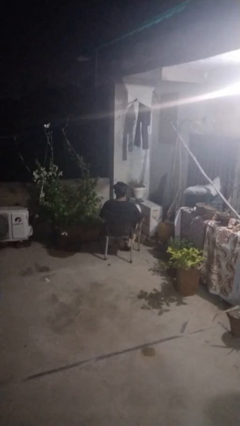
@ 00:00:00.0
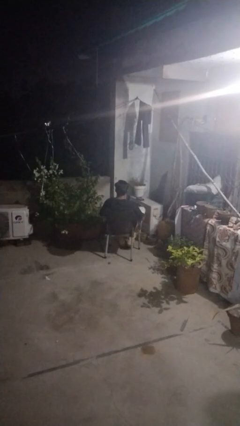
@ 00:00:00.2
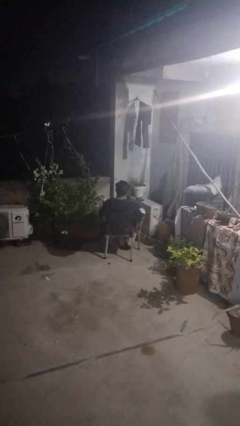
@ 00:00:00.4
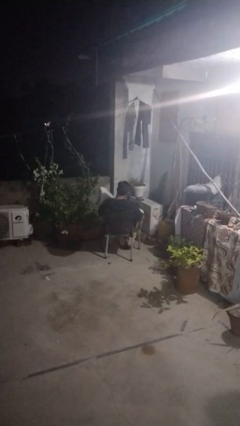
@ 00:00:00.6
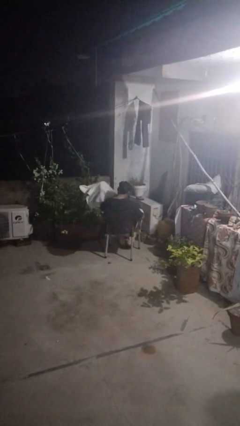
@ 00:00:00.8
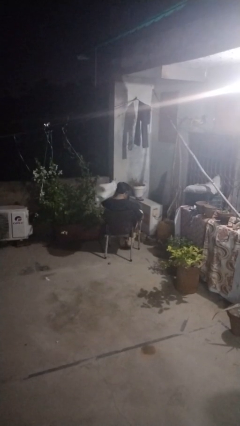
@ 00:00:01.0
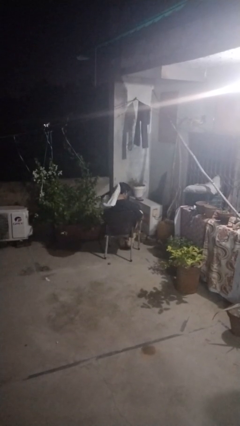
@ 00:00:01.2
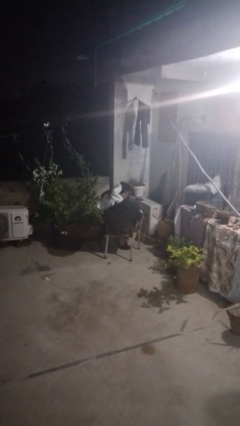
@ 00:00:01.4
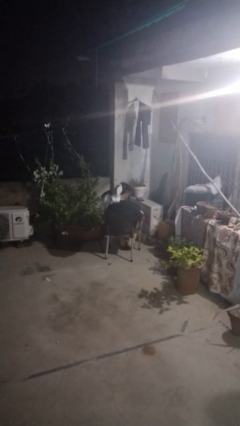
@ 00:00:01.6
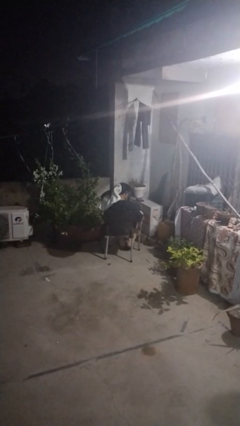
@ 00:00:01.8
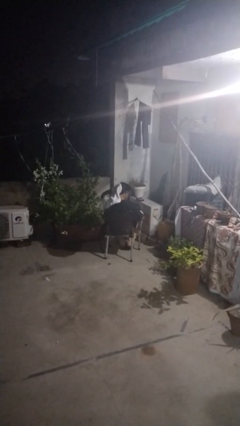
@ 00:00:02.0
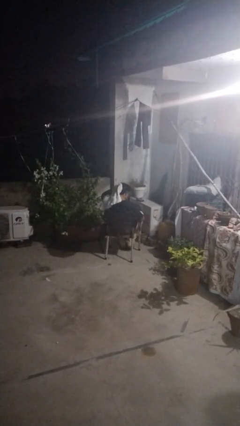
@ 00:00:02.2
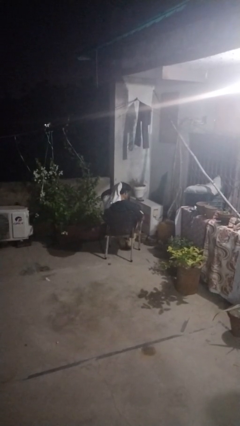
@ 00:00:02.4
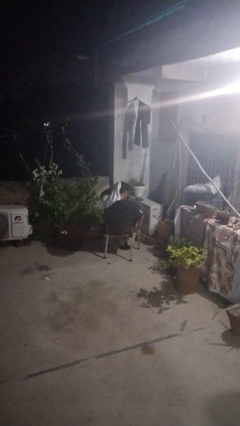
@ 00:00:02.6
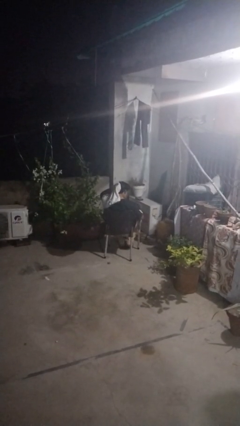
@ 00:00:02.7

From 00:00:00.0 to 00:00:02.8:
person dries hair with towel

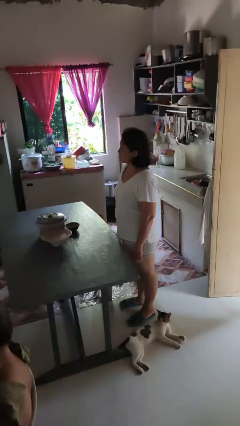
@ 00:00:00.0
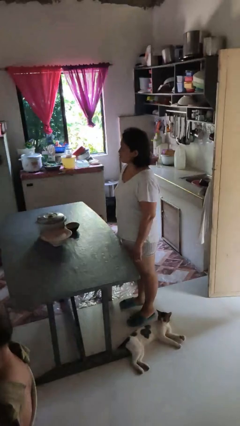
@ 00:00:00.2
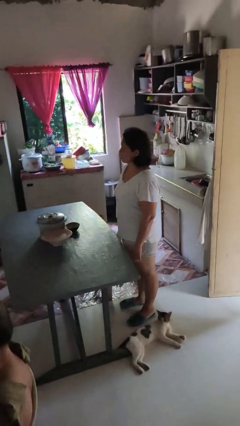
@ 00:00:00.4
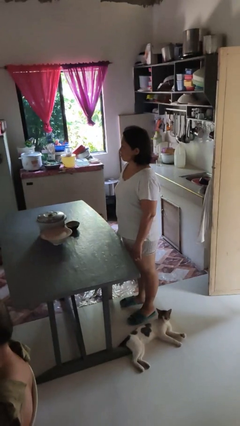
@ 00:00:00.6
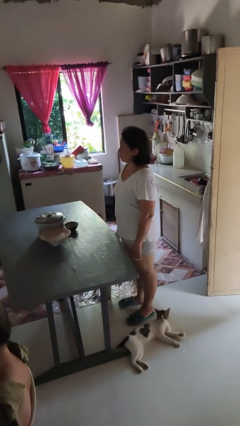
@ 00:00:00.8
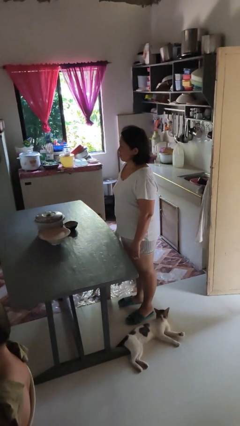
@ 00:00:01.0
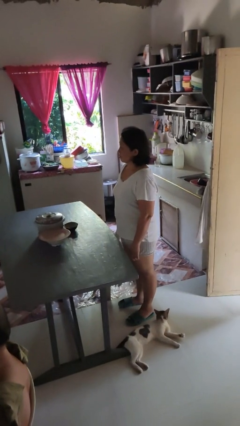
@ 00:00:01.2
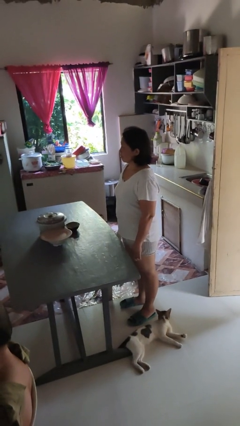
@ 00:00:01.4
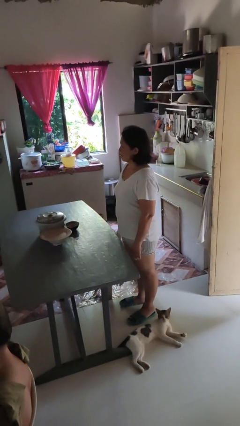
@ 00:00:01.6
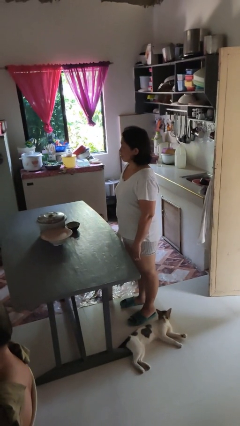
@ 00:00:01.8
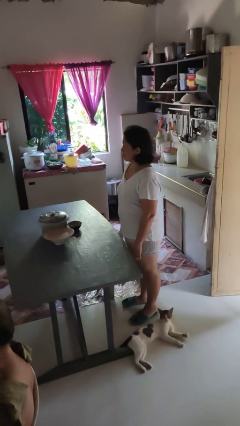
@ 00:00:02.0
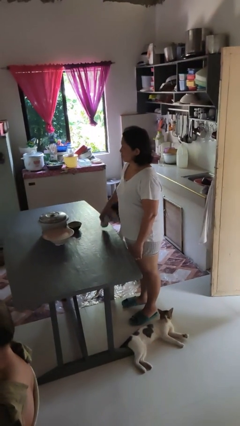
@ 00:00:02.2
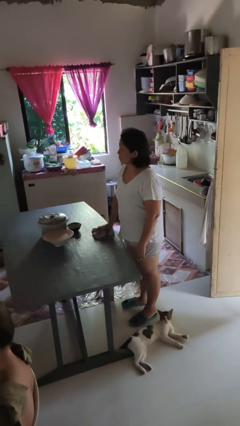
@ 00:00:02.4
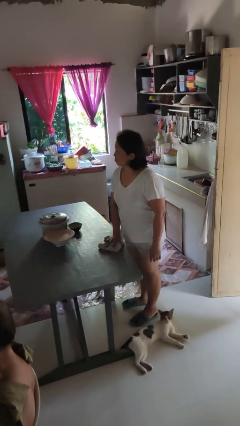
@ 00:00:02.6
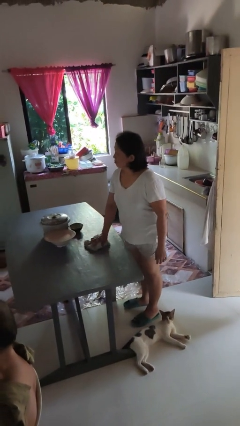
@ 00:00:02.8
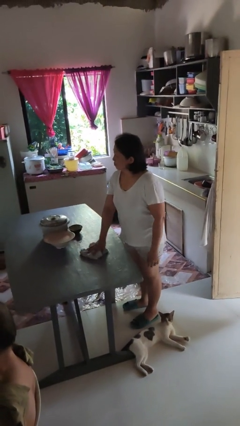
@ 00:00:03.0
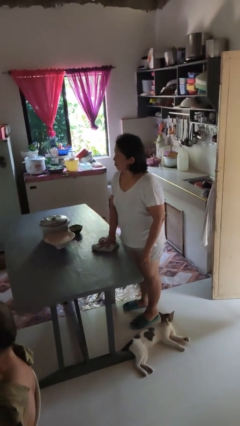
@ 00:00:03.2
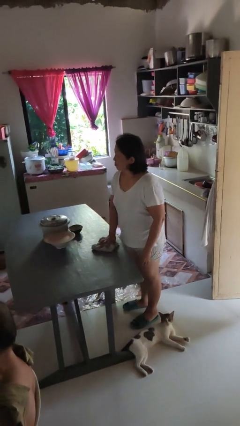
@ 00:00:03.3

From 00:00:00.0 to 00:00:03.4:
person cleans table with rag

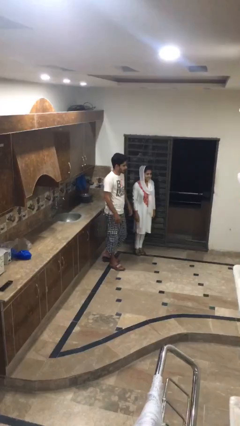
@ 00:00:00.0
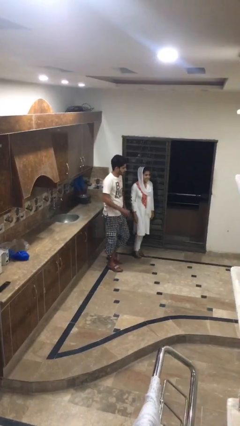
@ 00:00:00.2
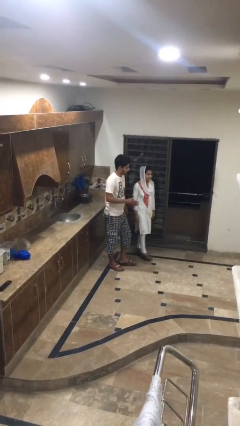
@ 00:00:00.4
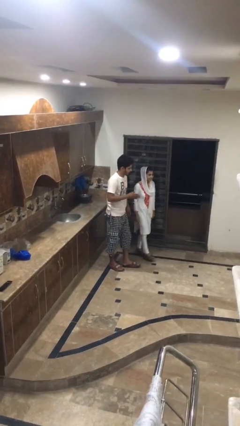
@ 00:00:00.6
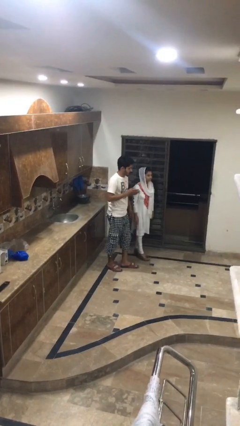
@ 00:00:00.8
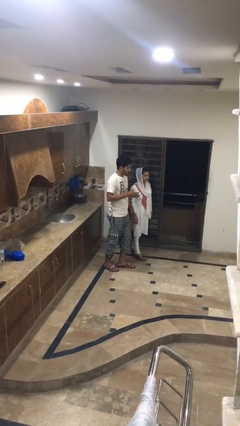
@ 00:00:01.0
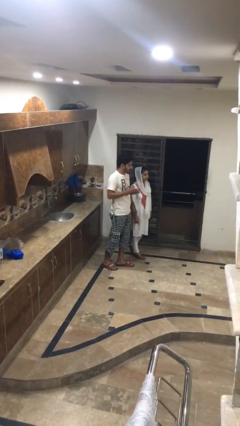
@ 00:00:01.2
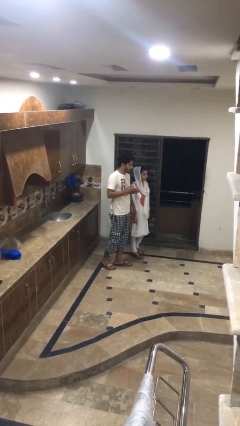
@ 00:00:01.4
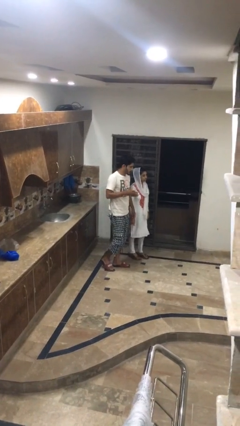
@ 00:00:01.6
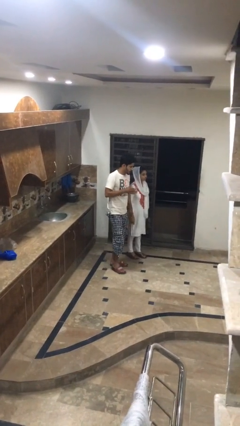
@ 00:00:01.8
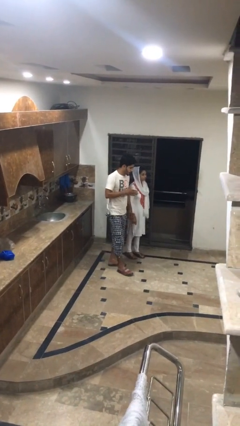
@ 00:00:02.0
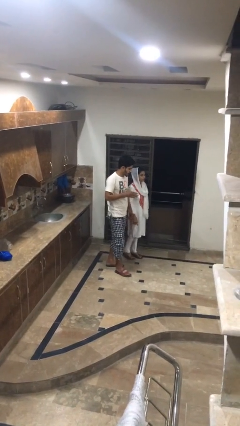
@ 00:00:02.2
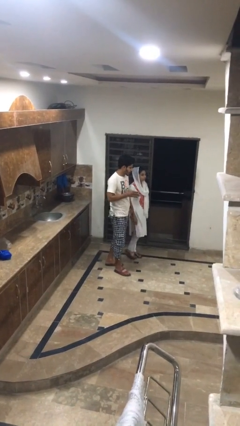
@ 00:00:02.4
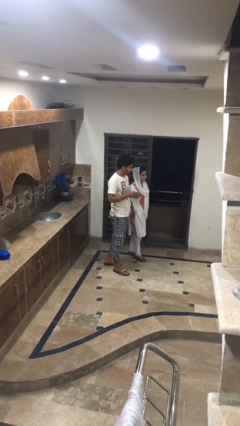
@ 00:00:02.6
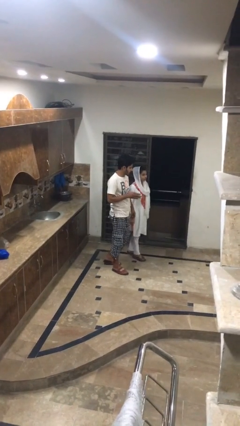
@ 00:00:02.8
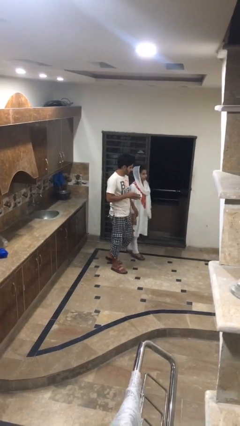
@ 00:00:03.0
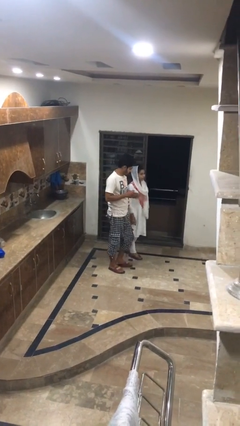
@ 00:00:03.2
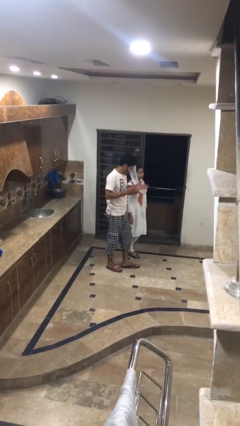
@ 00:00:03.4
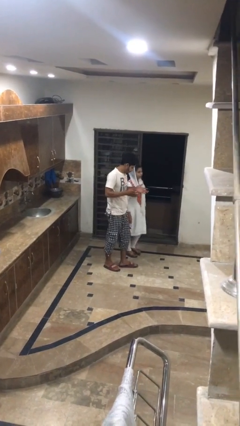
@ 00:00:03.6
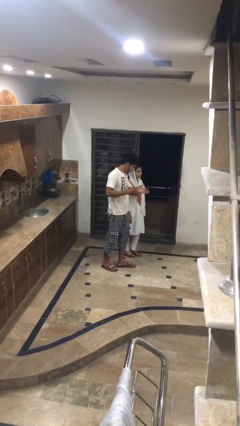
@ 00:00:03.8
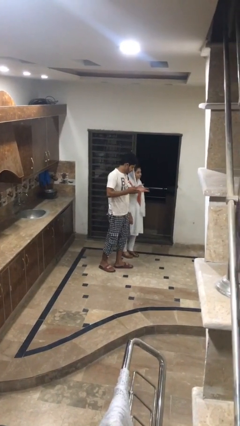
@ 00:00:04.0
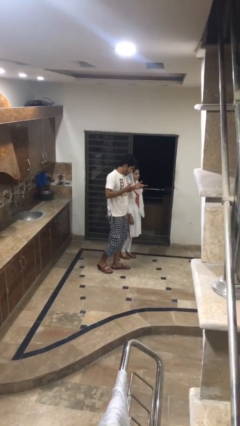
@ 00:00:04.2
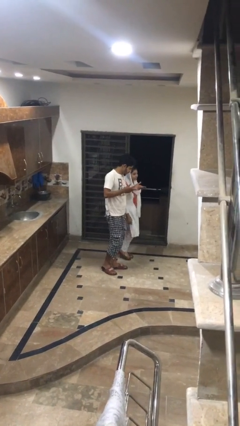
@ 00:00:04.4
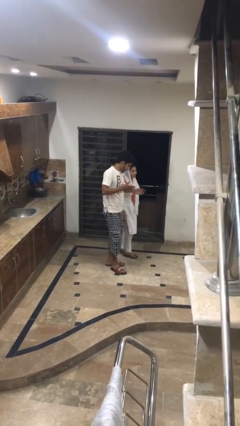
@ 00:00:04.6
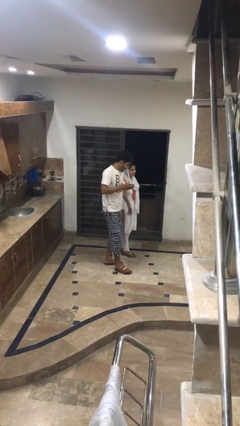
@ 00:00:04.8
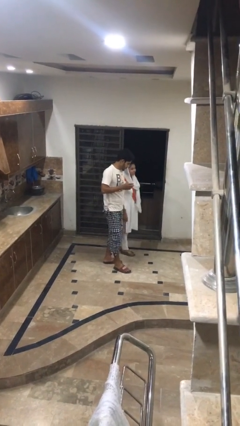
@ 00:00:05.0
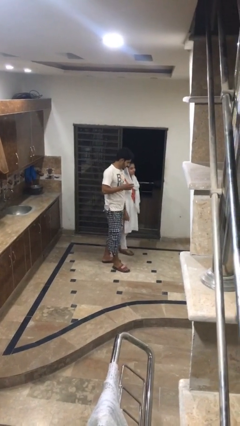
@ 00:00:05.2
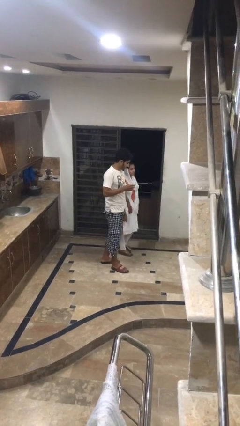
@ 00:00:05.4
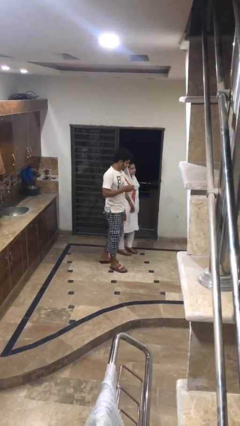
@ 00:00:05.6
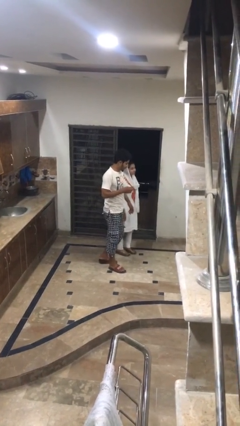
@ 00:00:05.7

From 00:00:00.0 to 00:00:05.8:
person talks to person

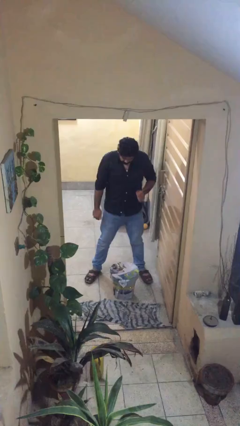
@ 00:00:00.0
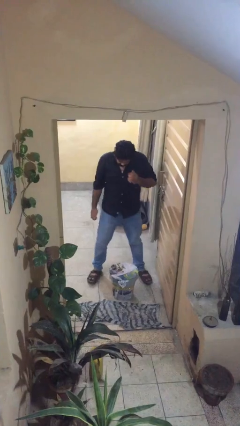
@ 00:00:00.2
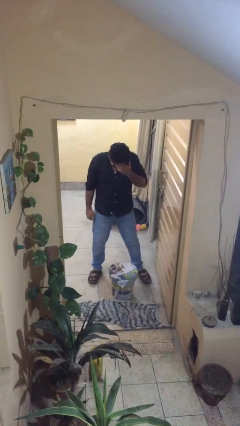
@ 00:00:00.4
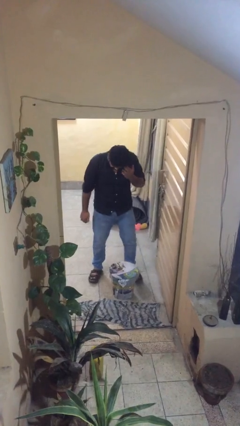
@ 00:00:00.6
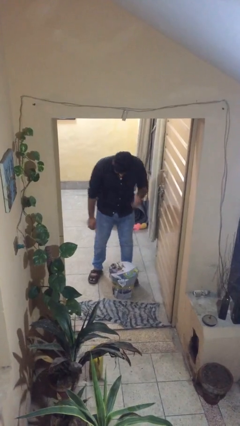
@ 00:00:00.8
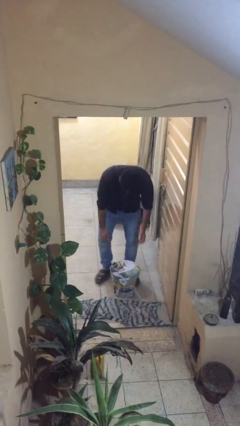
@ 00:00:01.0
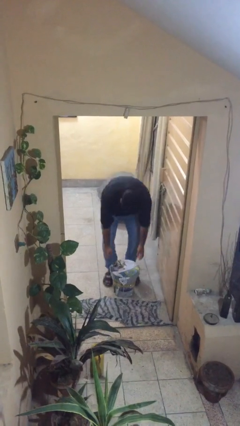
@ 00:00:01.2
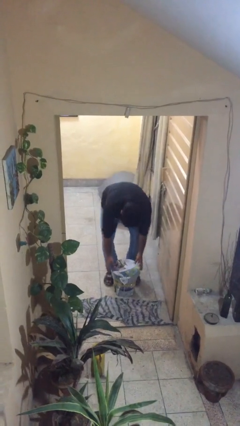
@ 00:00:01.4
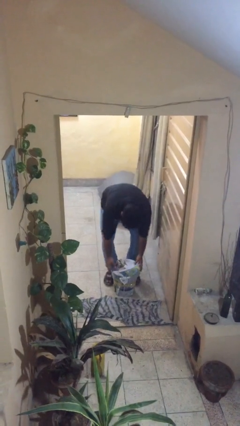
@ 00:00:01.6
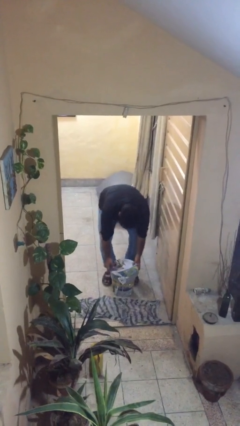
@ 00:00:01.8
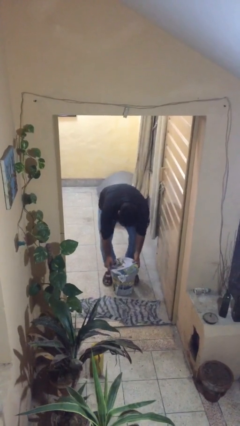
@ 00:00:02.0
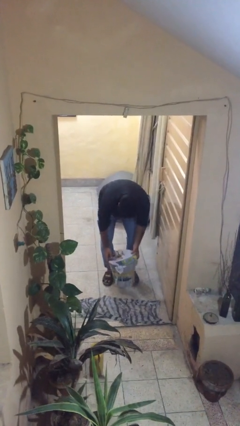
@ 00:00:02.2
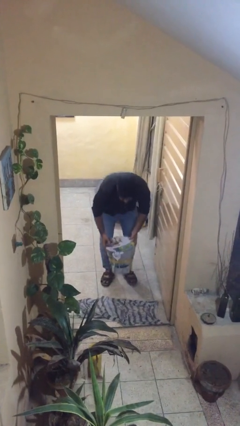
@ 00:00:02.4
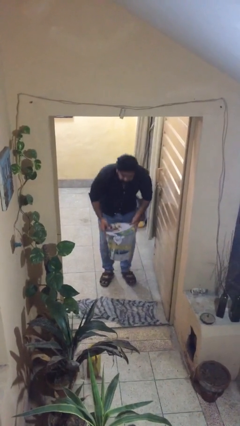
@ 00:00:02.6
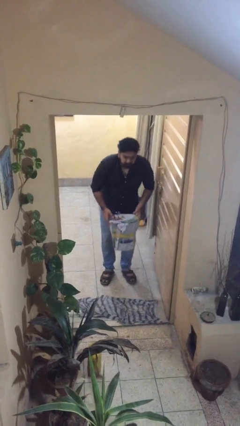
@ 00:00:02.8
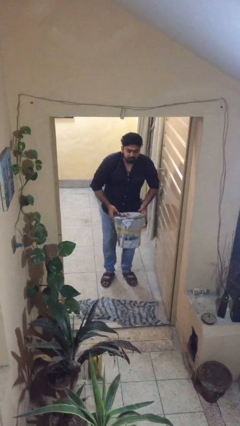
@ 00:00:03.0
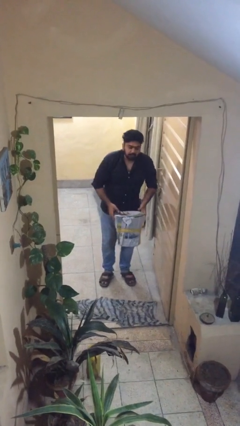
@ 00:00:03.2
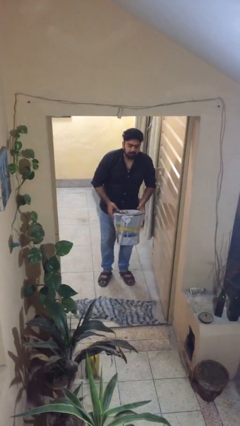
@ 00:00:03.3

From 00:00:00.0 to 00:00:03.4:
person picks up object from floor

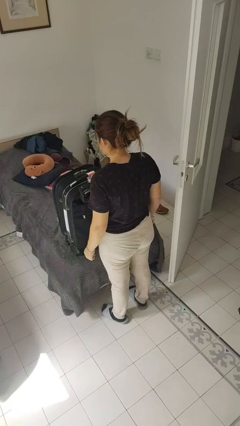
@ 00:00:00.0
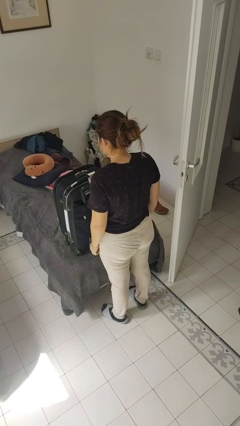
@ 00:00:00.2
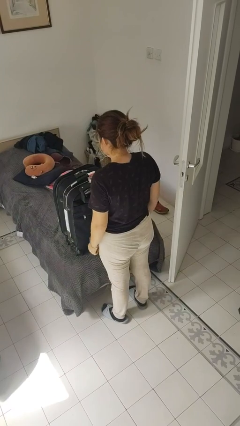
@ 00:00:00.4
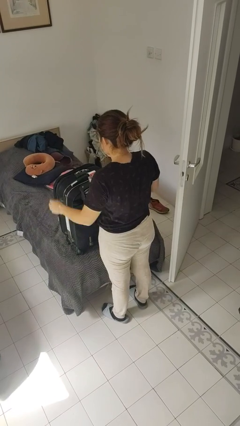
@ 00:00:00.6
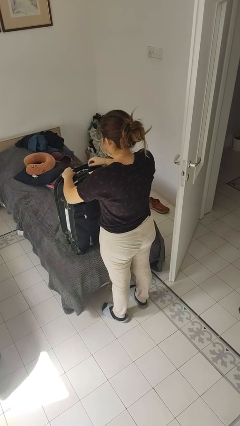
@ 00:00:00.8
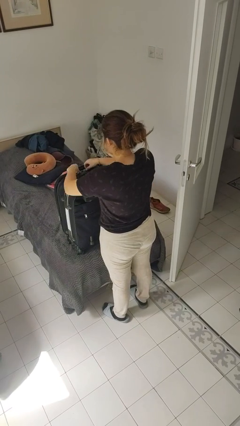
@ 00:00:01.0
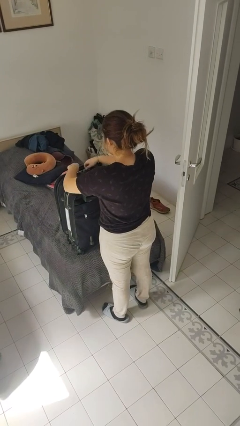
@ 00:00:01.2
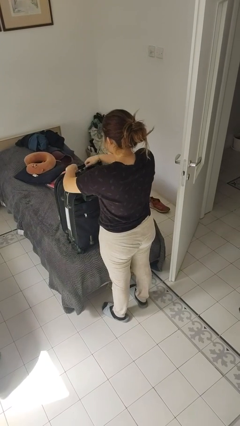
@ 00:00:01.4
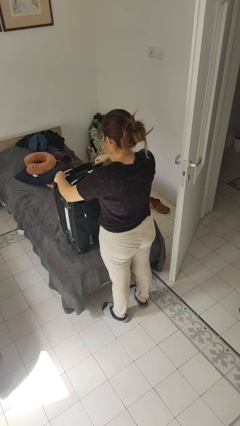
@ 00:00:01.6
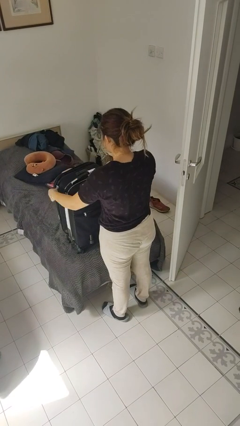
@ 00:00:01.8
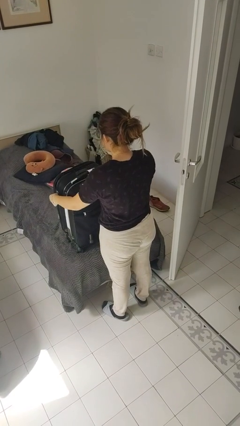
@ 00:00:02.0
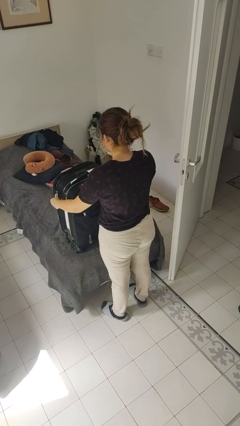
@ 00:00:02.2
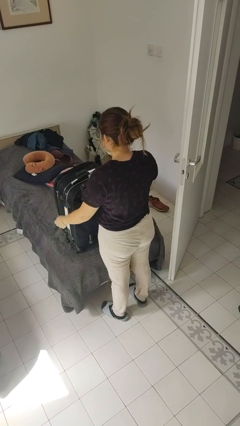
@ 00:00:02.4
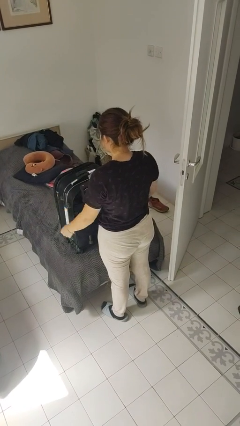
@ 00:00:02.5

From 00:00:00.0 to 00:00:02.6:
person opens suitcase
